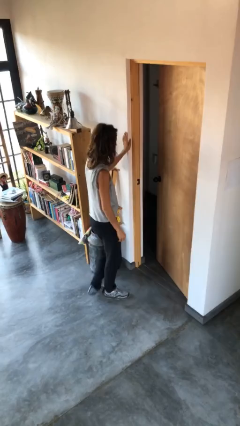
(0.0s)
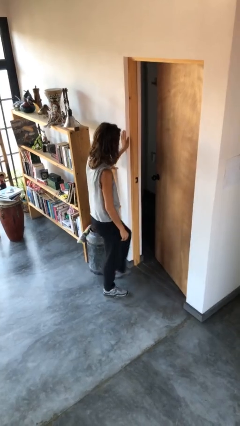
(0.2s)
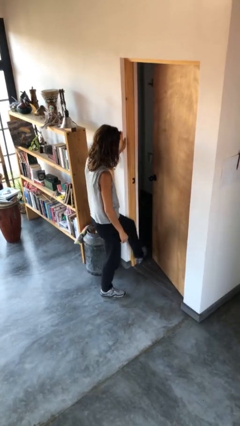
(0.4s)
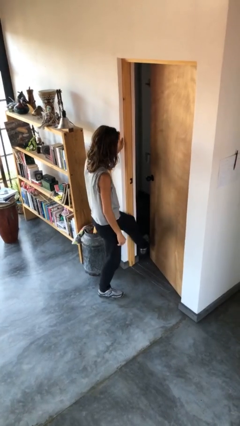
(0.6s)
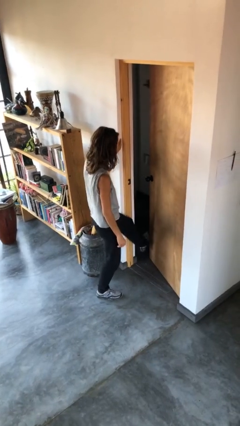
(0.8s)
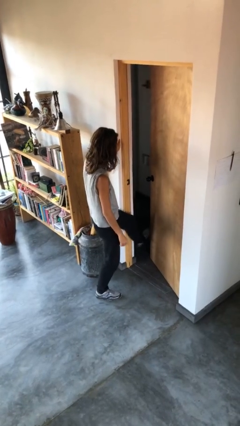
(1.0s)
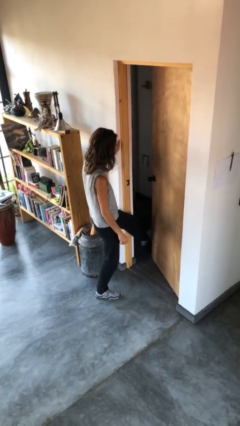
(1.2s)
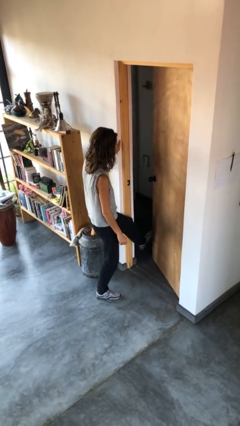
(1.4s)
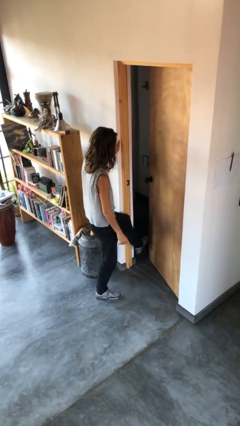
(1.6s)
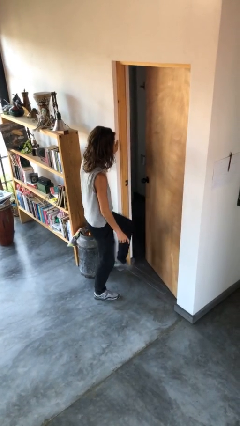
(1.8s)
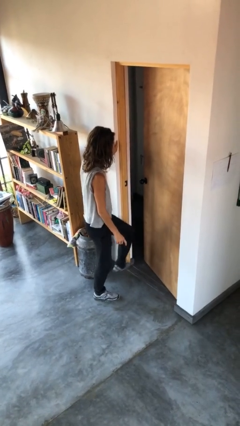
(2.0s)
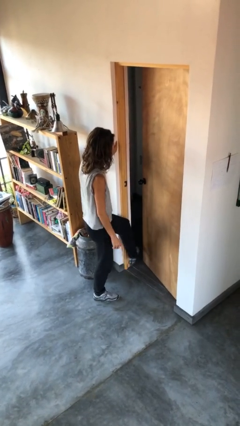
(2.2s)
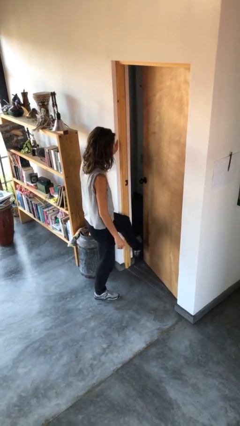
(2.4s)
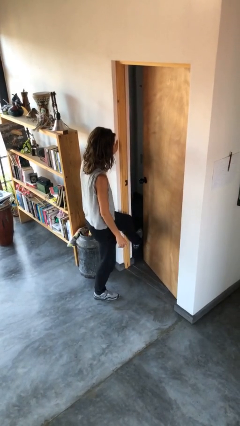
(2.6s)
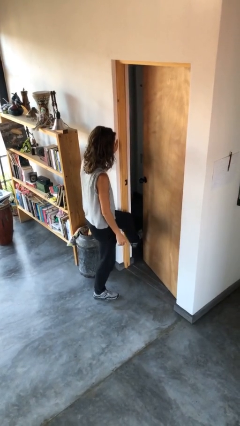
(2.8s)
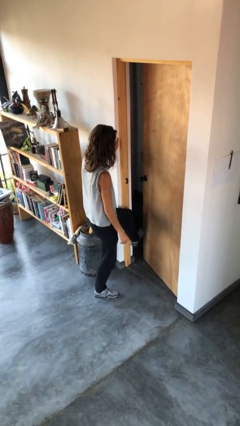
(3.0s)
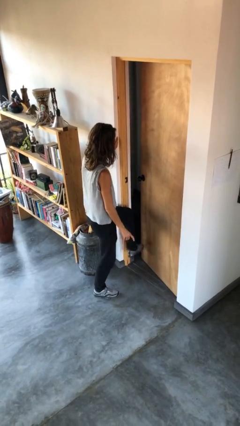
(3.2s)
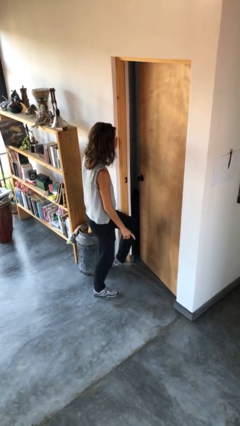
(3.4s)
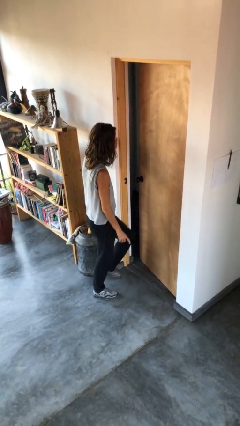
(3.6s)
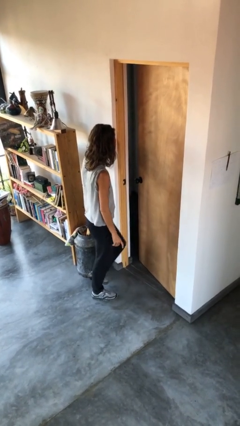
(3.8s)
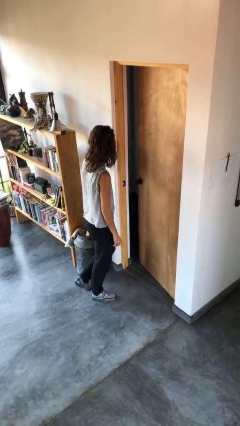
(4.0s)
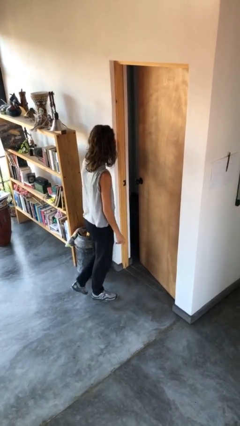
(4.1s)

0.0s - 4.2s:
person closes door with foot

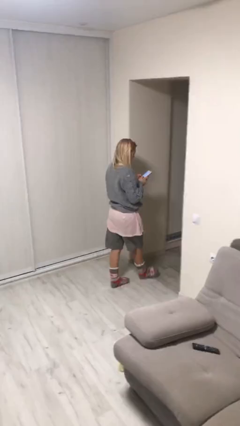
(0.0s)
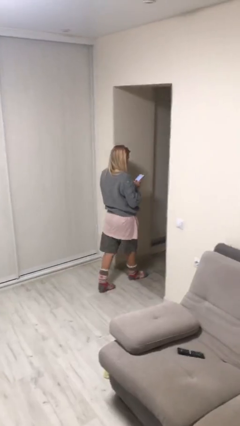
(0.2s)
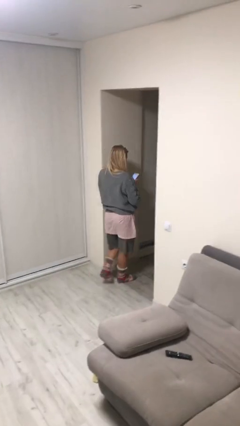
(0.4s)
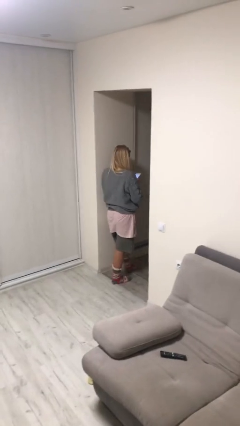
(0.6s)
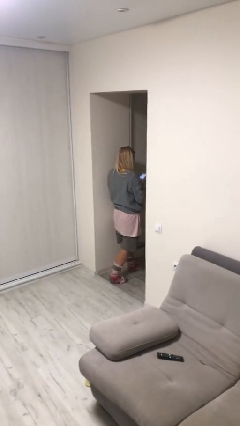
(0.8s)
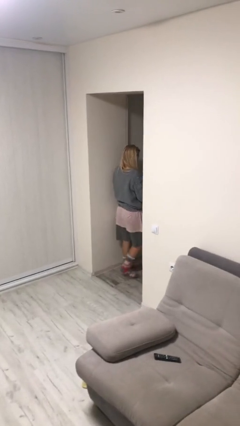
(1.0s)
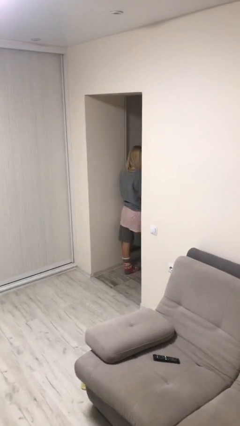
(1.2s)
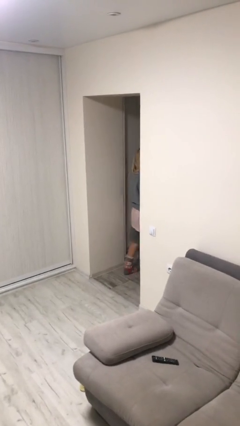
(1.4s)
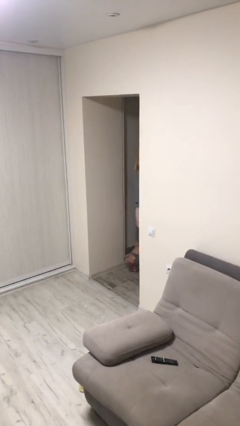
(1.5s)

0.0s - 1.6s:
person exits scene through structure

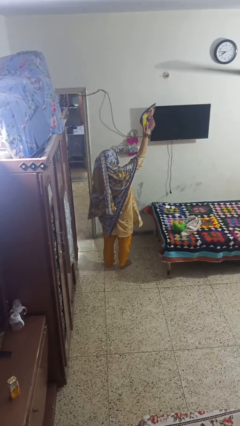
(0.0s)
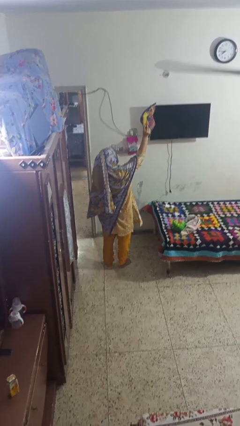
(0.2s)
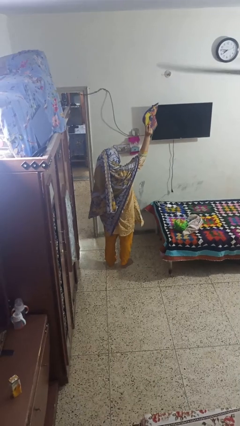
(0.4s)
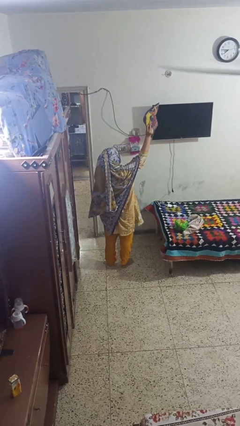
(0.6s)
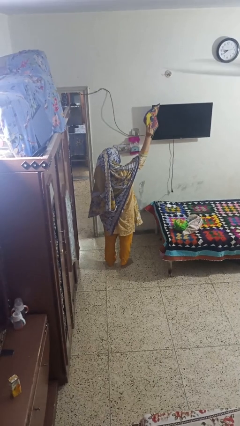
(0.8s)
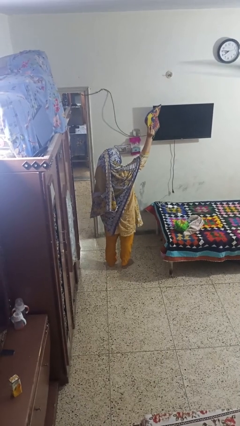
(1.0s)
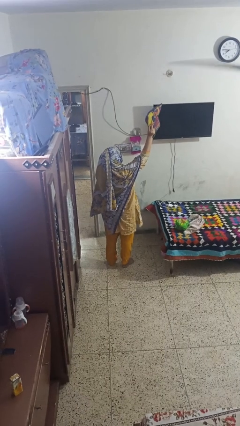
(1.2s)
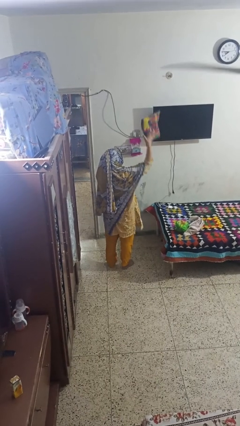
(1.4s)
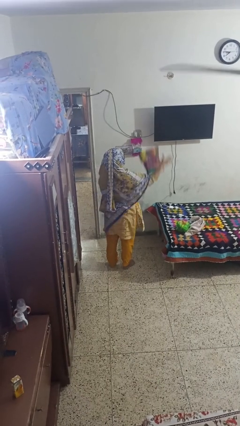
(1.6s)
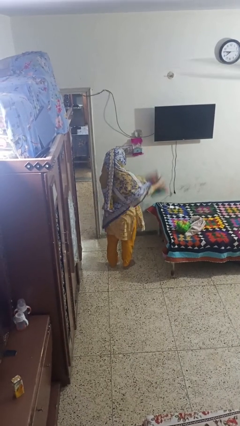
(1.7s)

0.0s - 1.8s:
person drops object

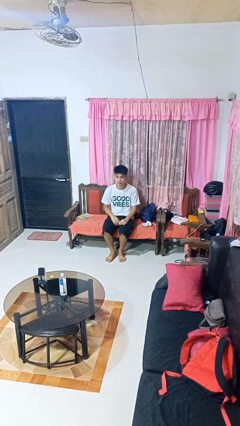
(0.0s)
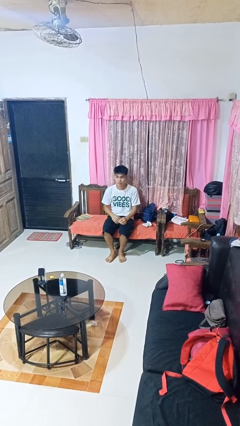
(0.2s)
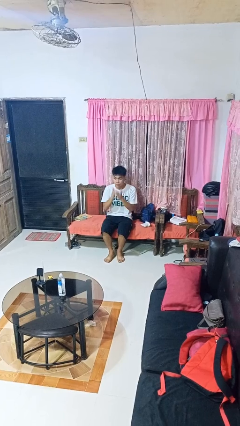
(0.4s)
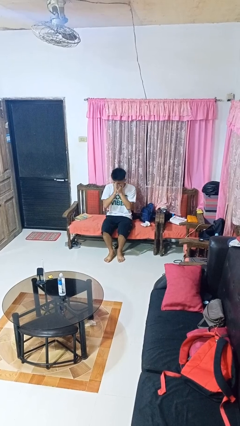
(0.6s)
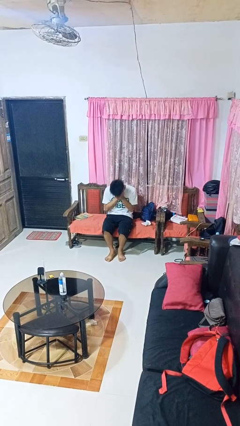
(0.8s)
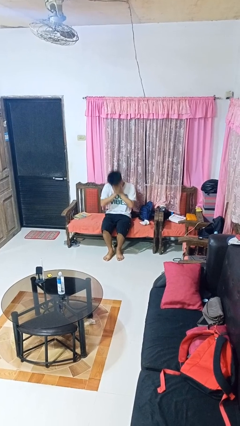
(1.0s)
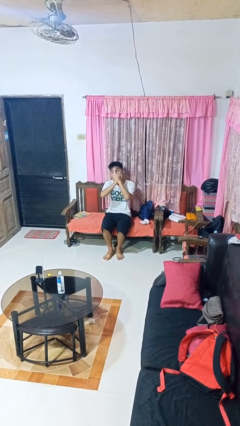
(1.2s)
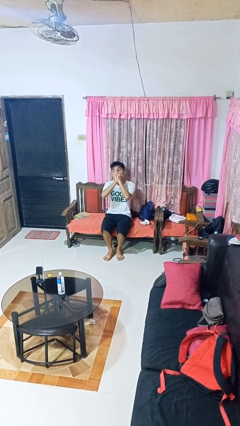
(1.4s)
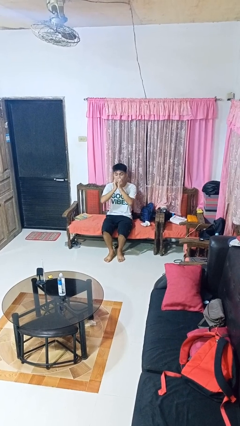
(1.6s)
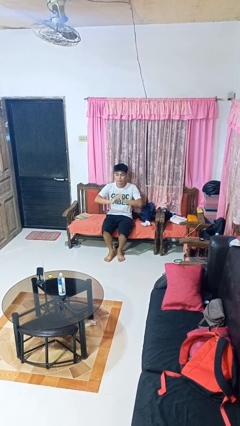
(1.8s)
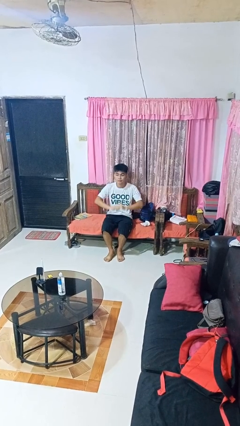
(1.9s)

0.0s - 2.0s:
person sneezes into hand

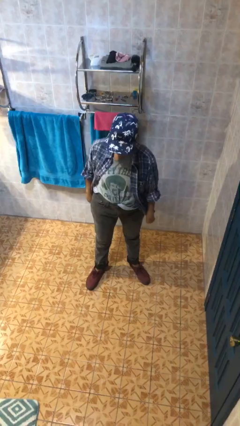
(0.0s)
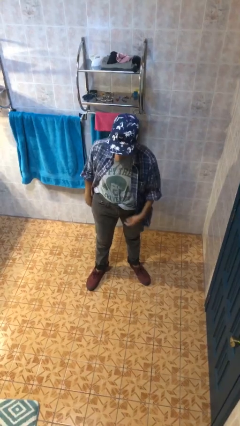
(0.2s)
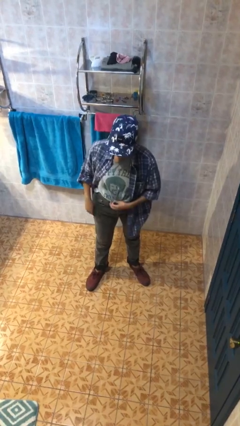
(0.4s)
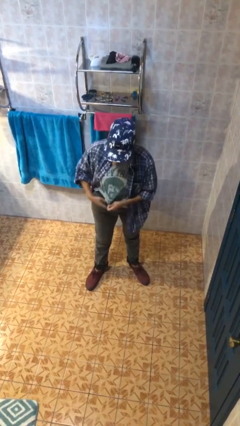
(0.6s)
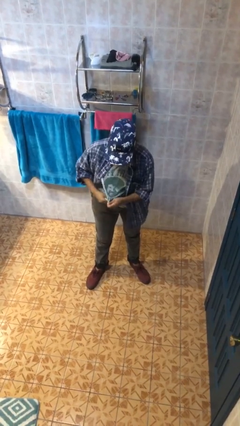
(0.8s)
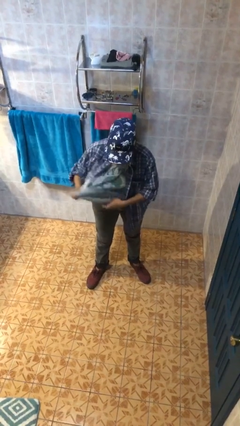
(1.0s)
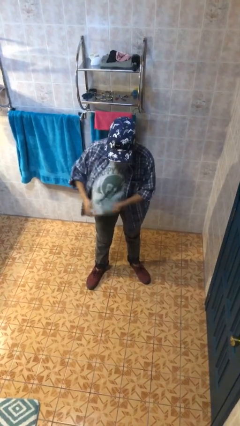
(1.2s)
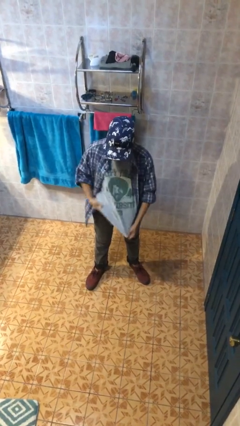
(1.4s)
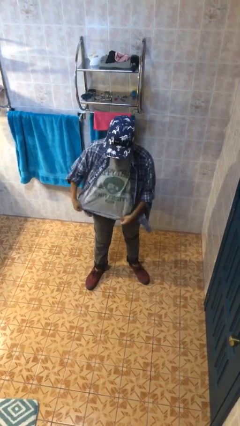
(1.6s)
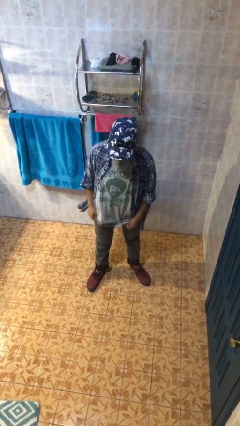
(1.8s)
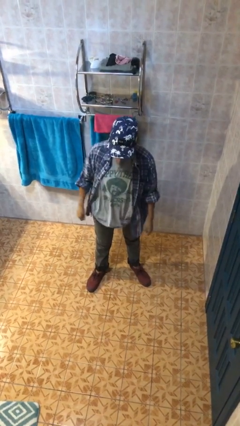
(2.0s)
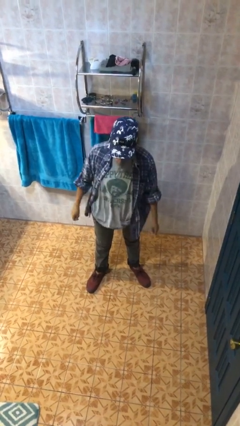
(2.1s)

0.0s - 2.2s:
person untucks shirt

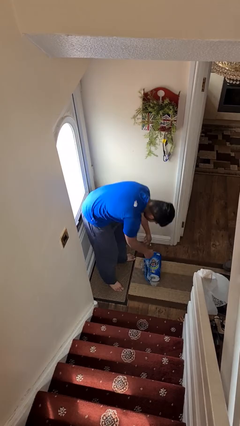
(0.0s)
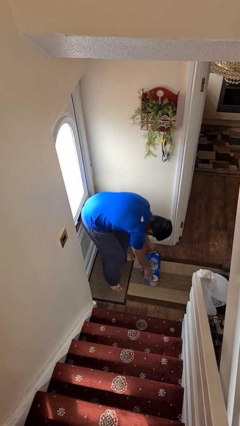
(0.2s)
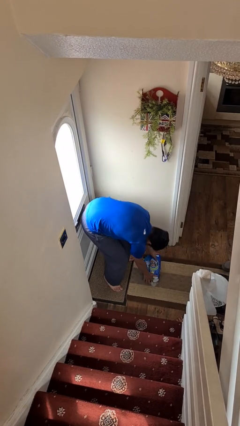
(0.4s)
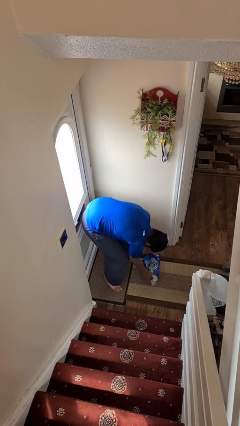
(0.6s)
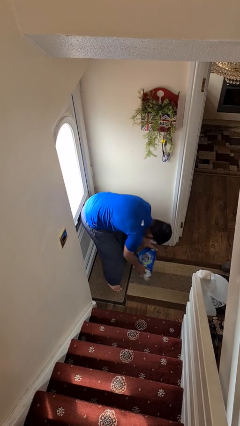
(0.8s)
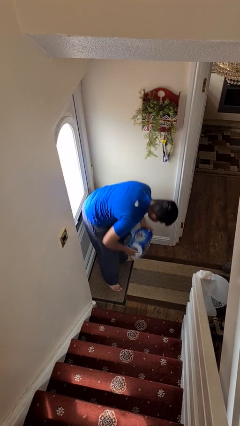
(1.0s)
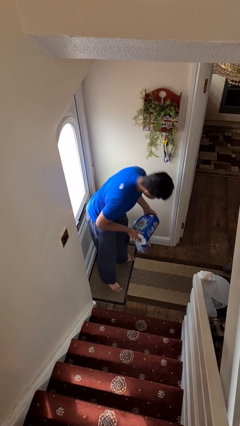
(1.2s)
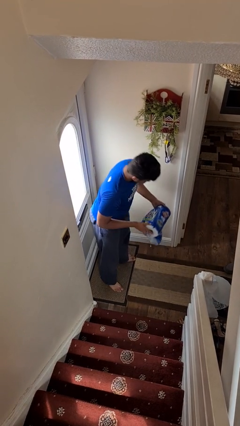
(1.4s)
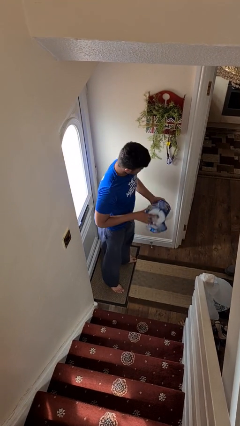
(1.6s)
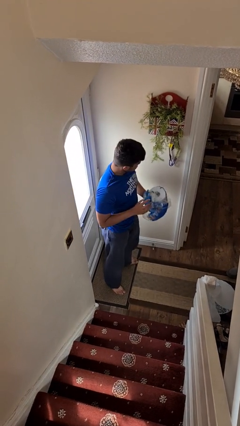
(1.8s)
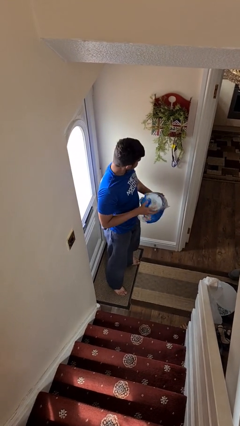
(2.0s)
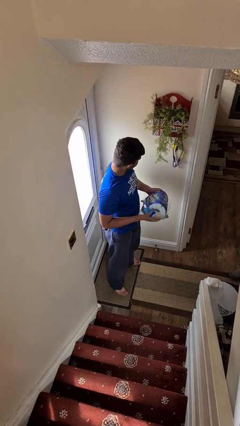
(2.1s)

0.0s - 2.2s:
person picks up object from floor

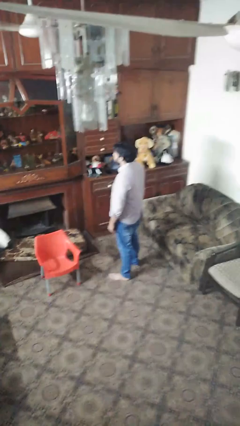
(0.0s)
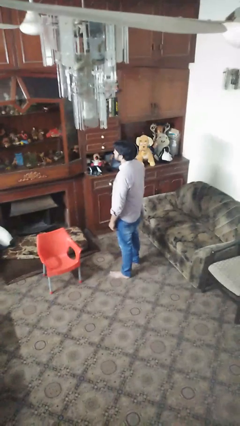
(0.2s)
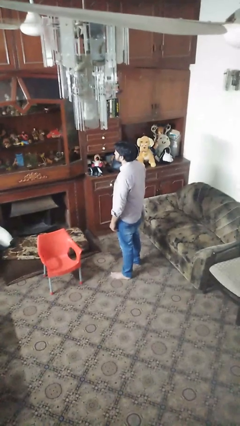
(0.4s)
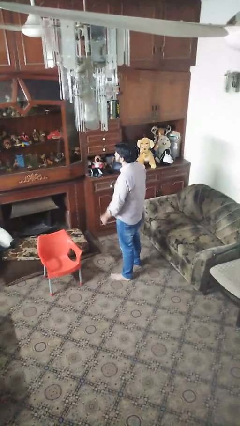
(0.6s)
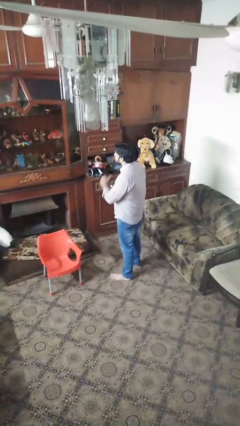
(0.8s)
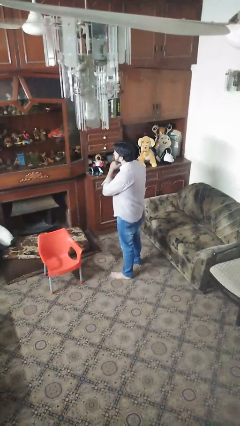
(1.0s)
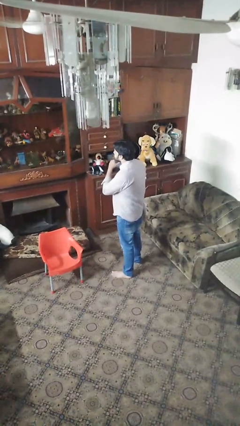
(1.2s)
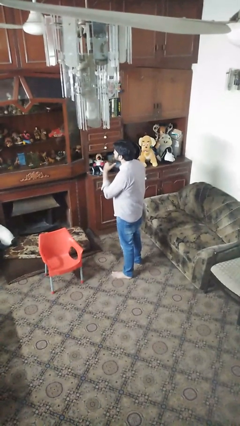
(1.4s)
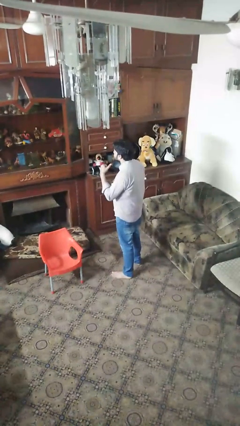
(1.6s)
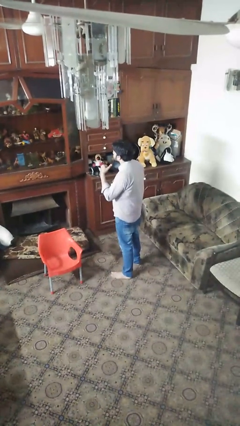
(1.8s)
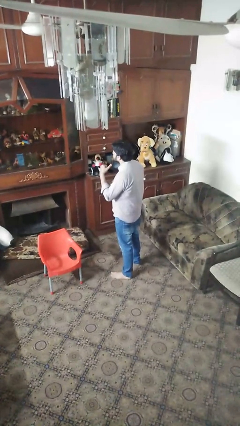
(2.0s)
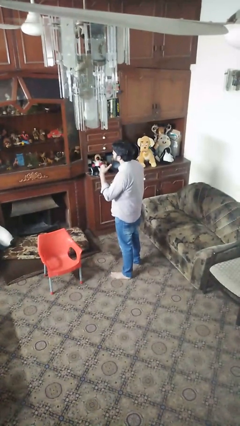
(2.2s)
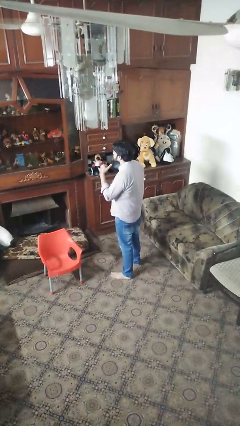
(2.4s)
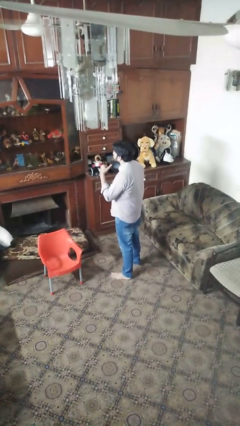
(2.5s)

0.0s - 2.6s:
person gestures cut

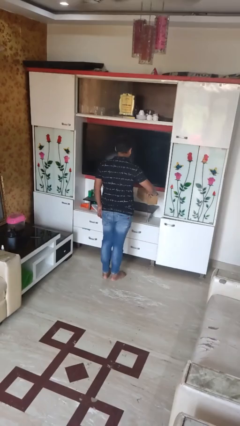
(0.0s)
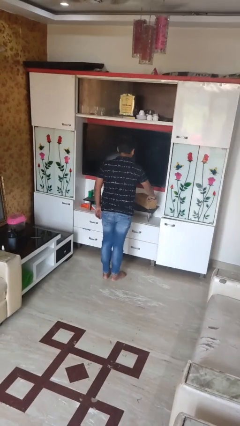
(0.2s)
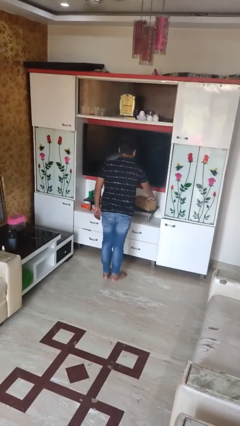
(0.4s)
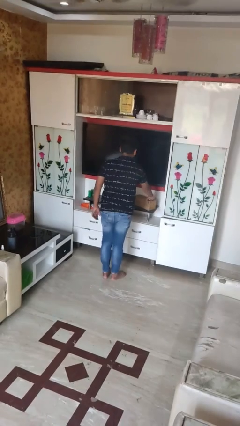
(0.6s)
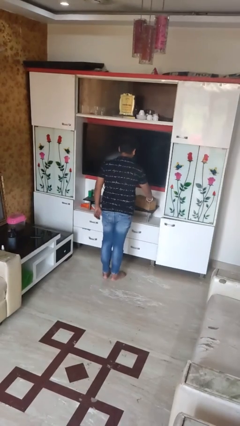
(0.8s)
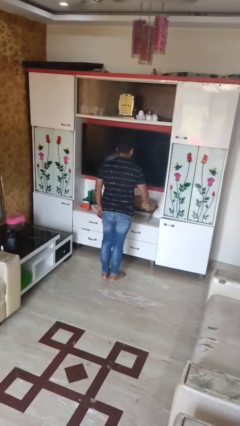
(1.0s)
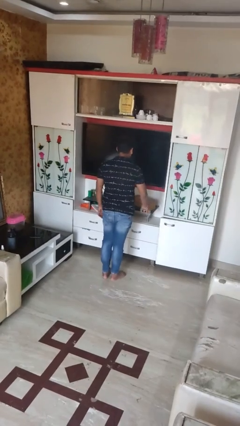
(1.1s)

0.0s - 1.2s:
person puts down object on countertop
